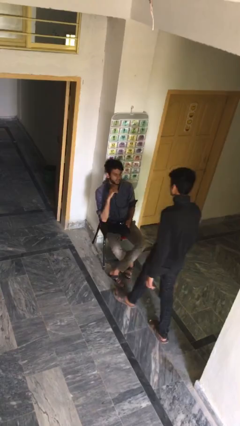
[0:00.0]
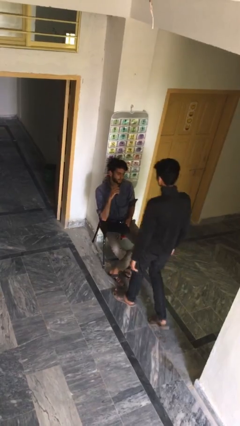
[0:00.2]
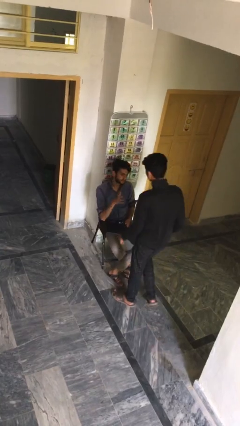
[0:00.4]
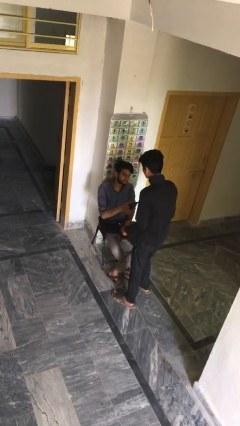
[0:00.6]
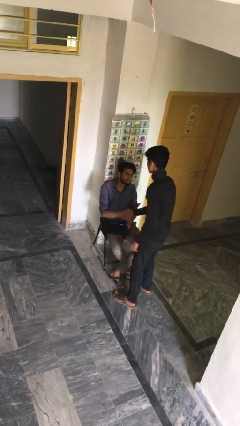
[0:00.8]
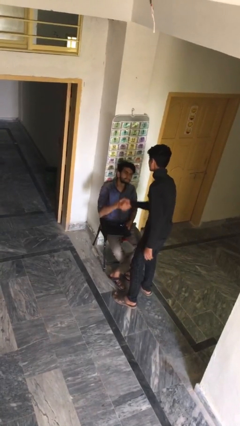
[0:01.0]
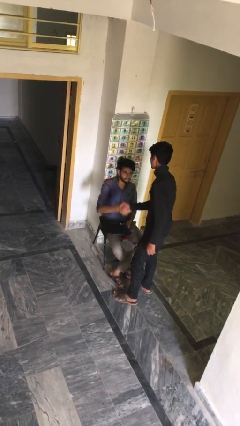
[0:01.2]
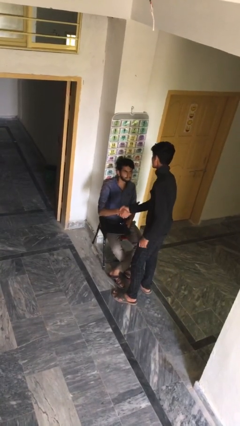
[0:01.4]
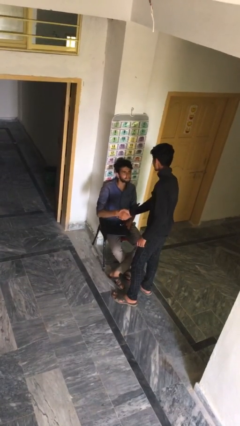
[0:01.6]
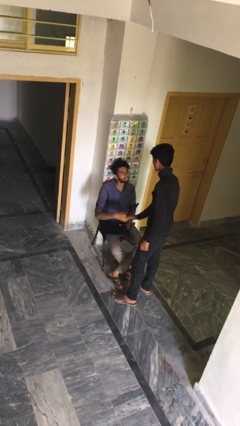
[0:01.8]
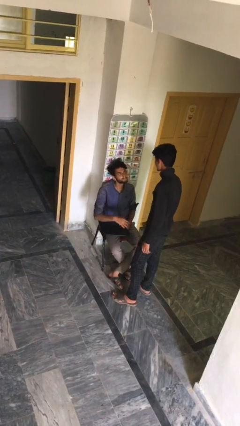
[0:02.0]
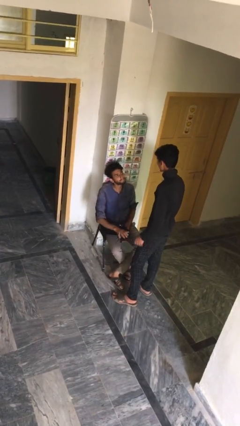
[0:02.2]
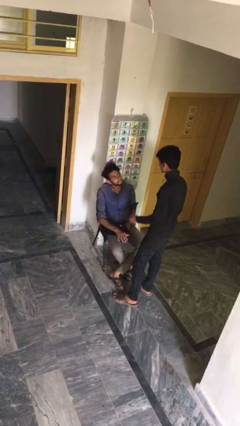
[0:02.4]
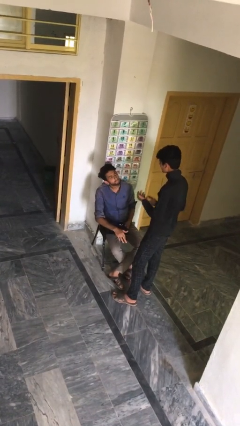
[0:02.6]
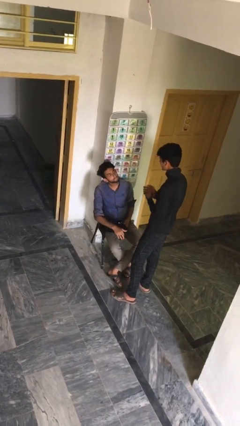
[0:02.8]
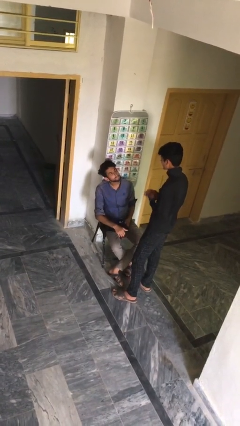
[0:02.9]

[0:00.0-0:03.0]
person shakes hand

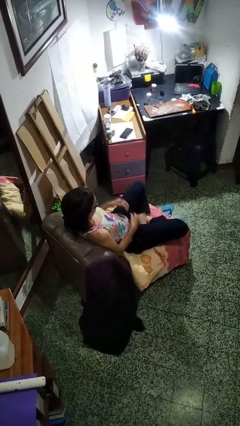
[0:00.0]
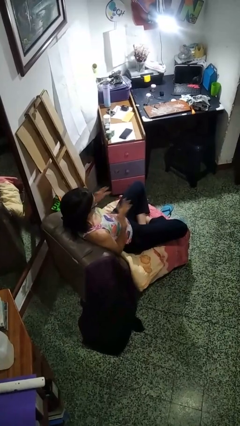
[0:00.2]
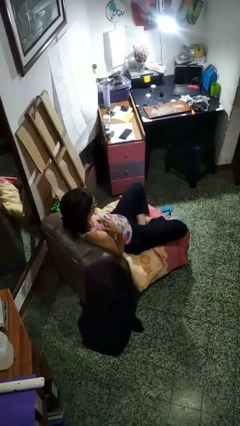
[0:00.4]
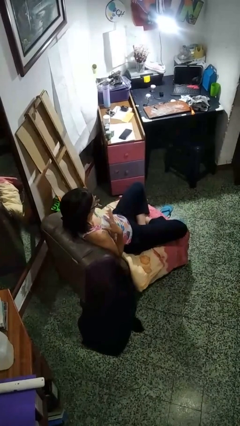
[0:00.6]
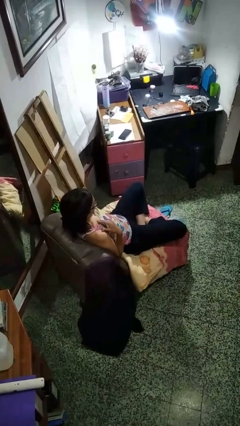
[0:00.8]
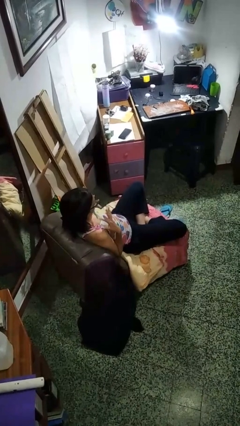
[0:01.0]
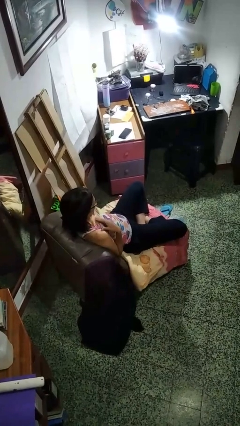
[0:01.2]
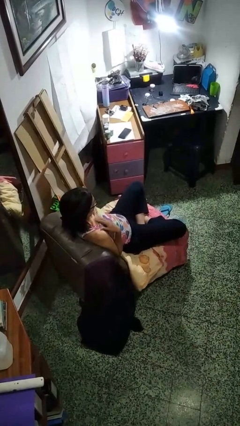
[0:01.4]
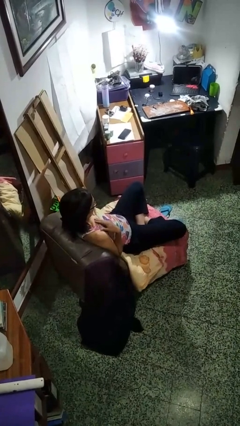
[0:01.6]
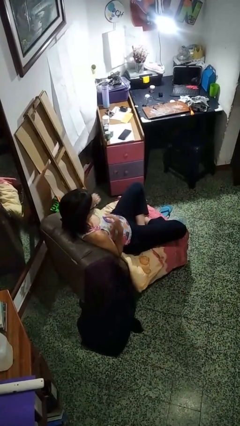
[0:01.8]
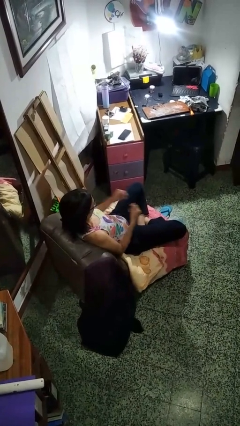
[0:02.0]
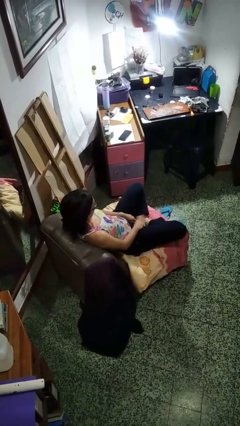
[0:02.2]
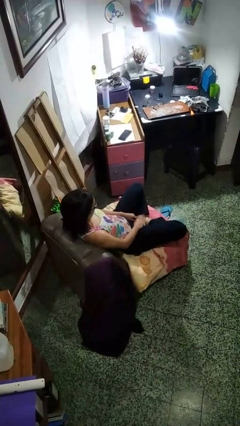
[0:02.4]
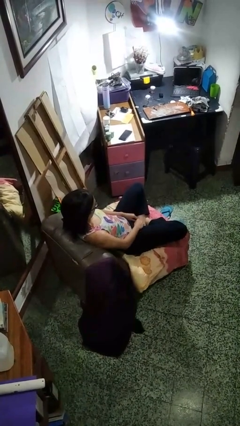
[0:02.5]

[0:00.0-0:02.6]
person drums on chest

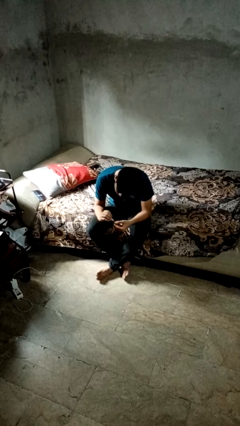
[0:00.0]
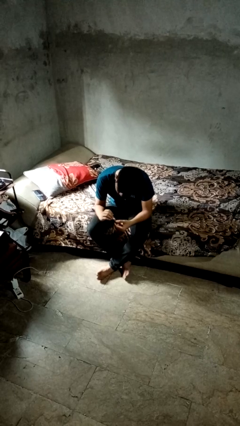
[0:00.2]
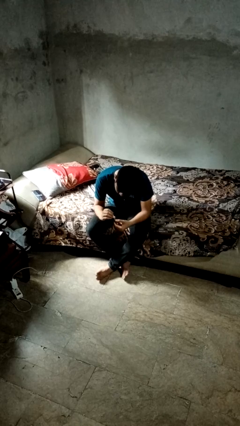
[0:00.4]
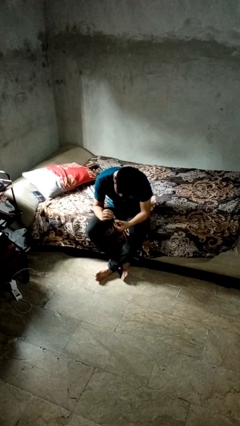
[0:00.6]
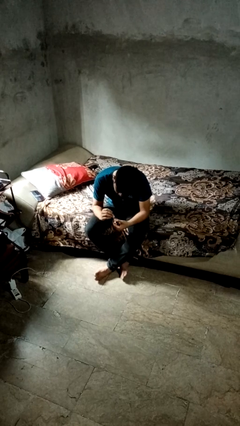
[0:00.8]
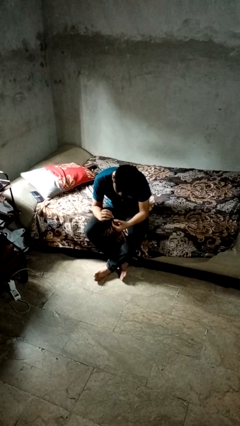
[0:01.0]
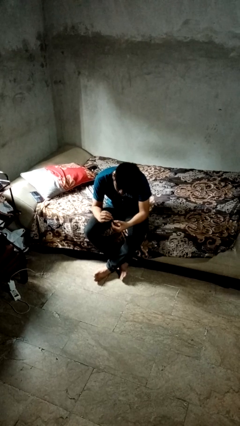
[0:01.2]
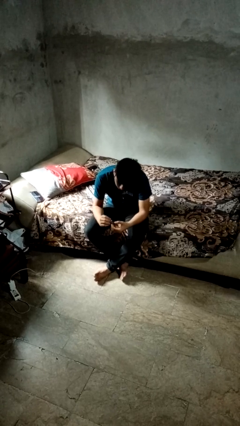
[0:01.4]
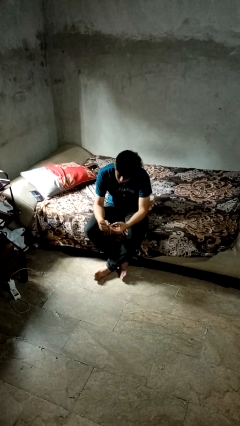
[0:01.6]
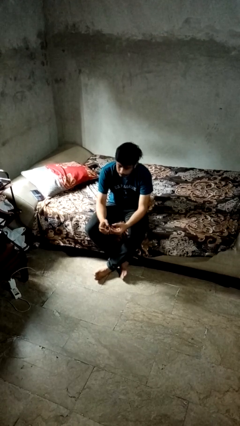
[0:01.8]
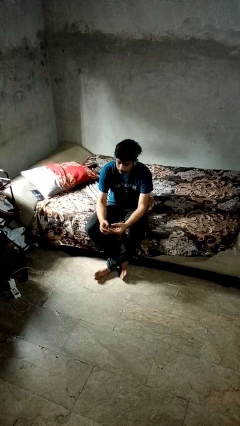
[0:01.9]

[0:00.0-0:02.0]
person clips fingernails

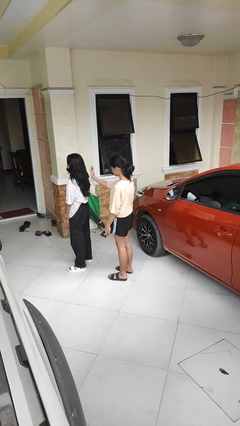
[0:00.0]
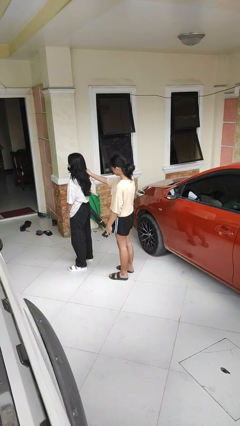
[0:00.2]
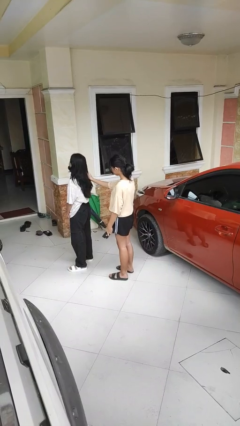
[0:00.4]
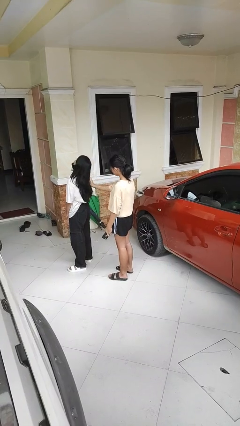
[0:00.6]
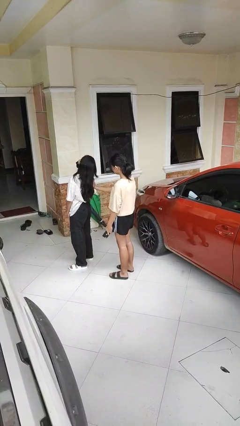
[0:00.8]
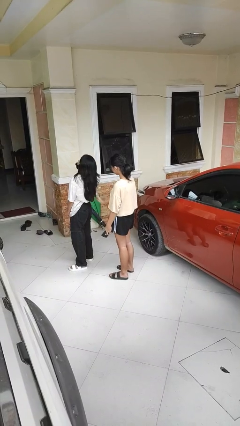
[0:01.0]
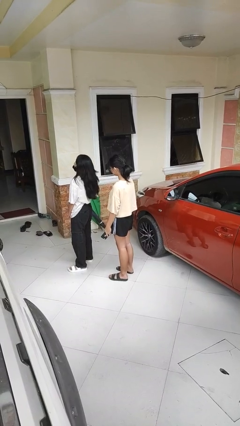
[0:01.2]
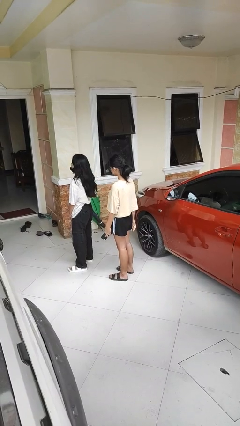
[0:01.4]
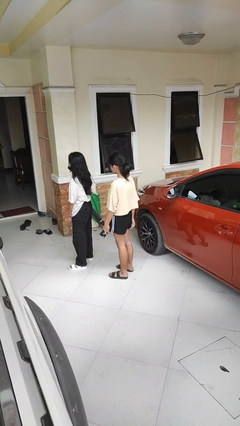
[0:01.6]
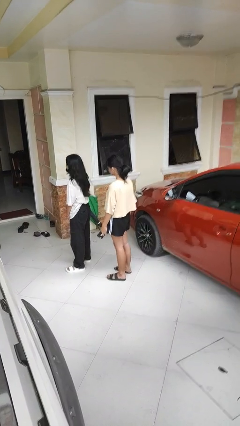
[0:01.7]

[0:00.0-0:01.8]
person grabs person by hair

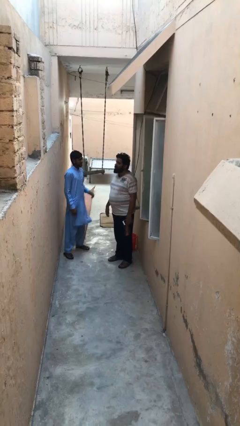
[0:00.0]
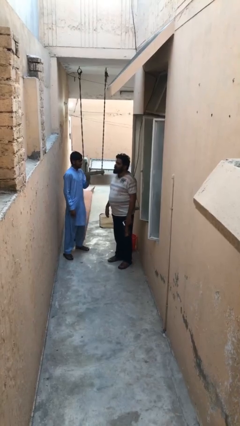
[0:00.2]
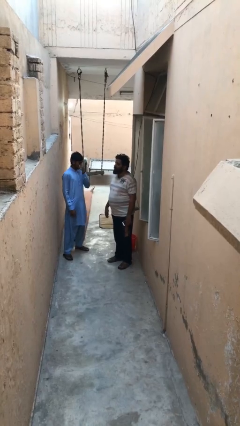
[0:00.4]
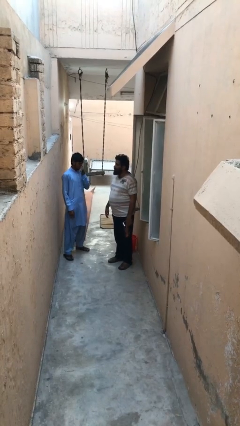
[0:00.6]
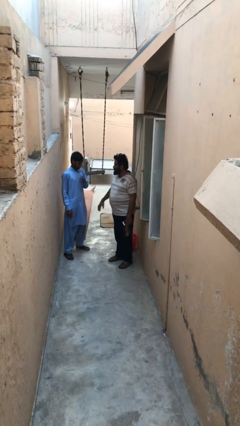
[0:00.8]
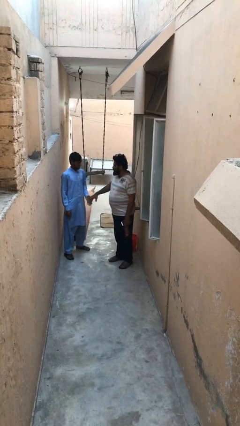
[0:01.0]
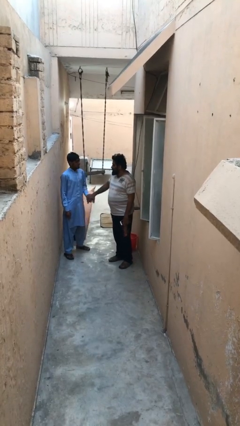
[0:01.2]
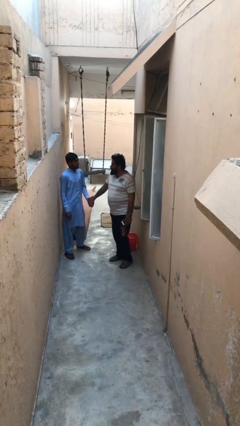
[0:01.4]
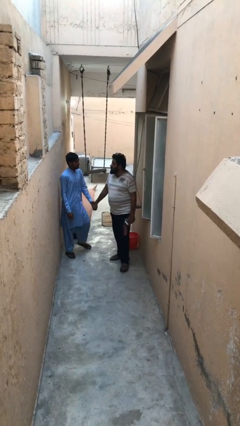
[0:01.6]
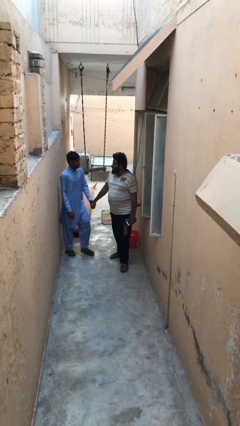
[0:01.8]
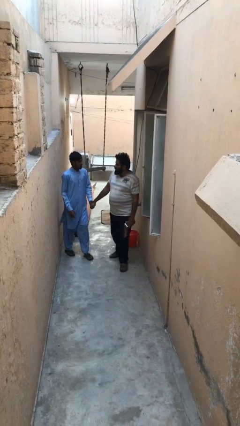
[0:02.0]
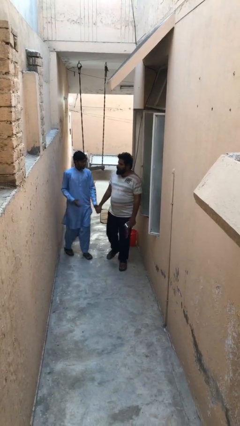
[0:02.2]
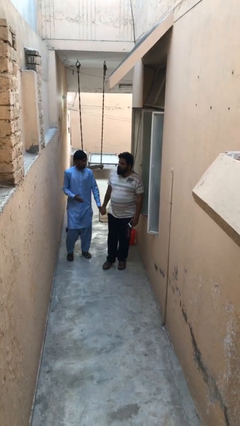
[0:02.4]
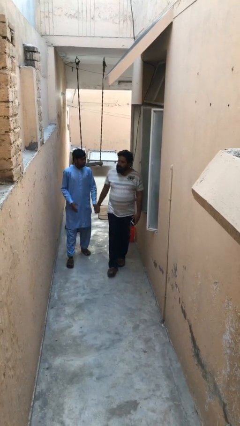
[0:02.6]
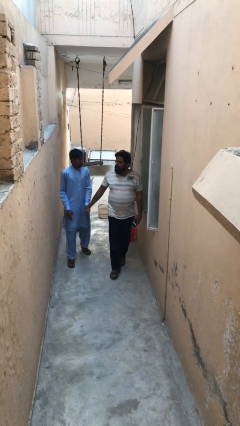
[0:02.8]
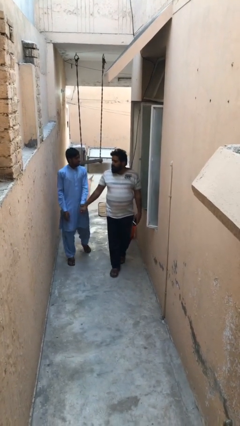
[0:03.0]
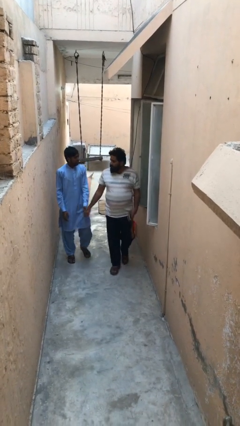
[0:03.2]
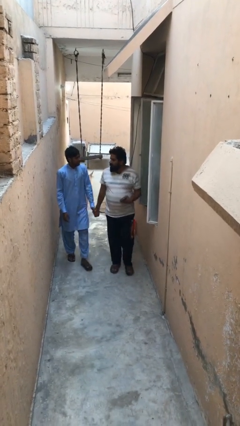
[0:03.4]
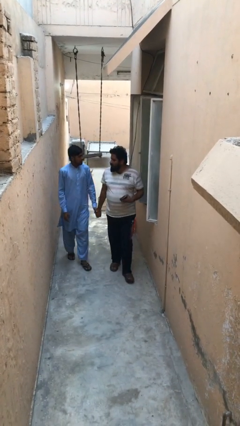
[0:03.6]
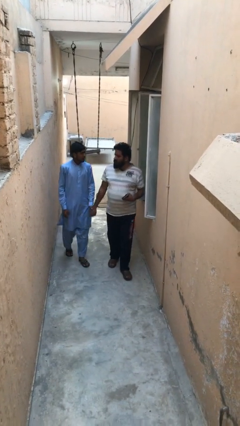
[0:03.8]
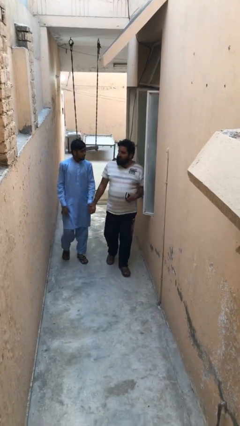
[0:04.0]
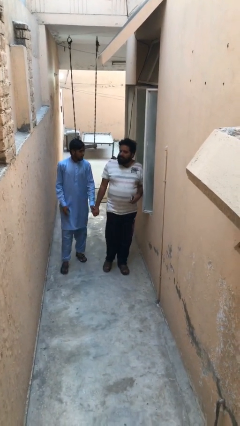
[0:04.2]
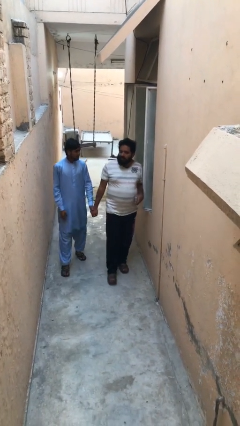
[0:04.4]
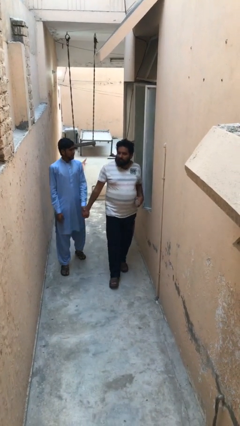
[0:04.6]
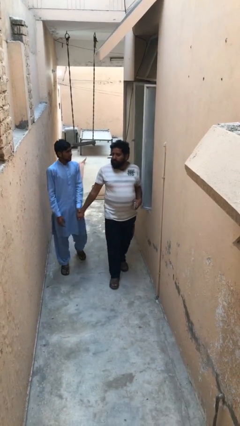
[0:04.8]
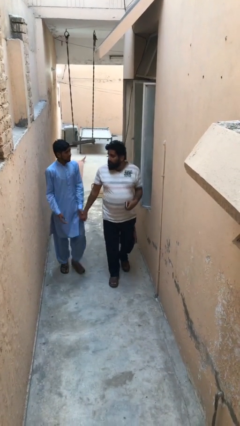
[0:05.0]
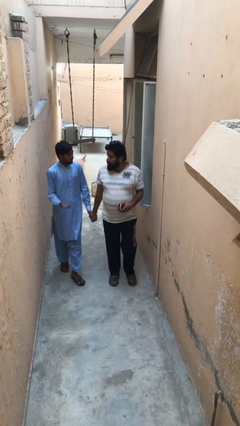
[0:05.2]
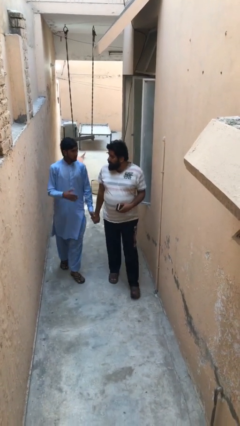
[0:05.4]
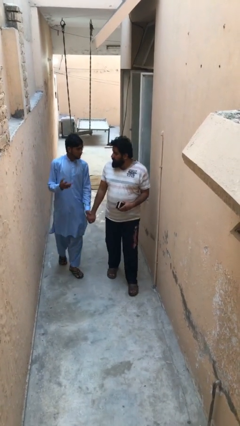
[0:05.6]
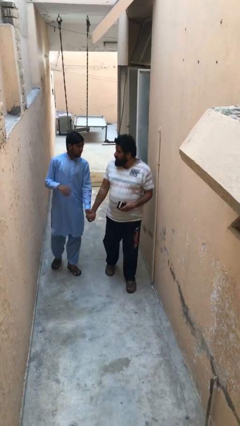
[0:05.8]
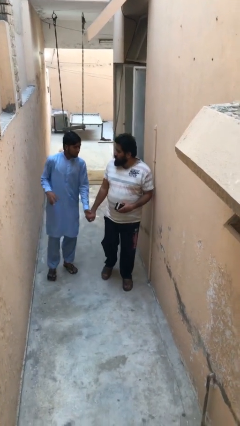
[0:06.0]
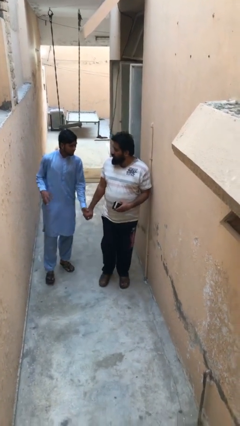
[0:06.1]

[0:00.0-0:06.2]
person holds hand

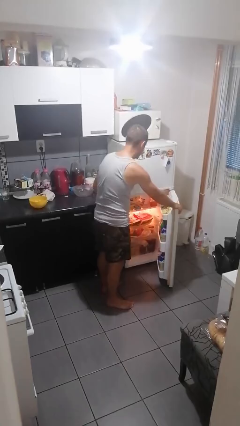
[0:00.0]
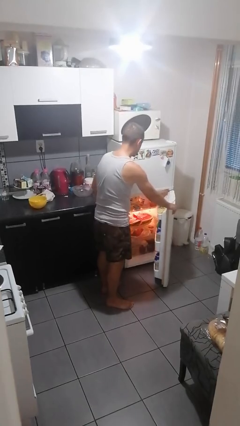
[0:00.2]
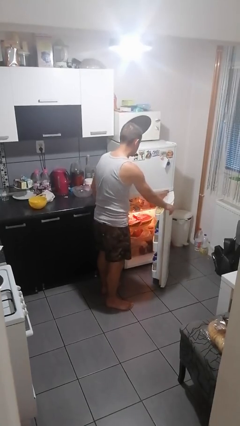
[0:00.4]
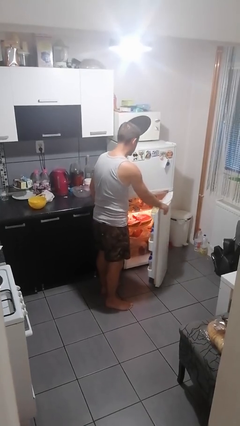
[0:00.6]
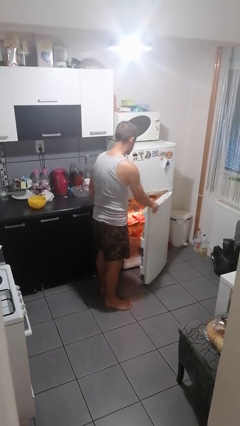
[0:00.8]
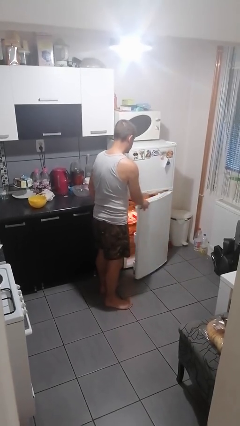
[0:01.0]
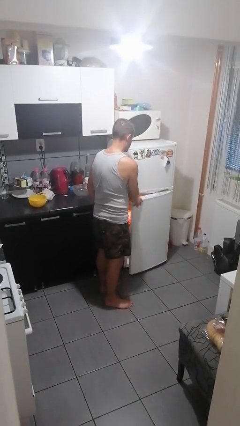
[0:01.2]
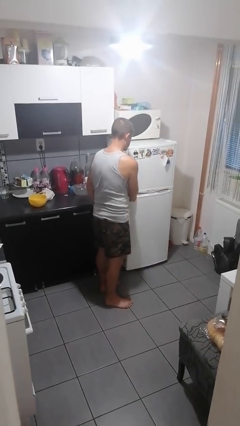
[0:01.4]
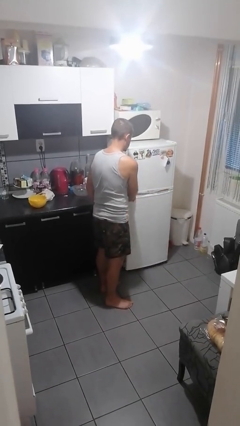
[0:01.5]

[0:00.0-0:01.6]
person closes refrigerator
